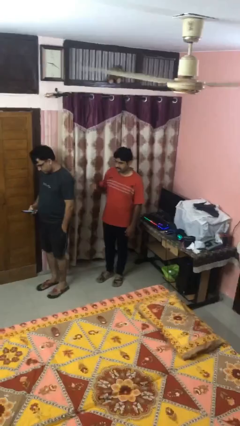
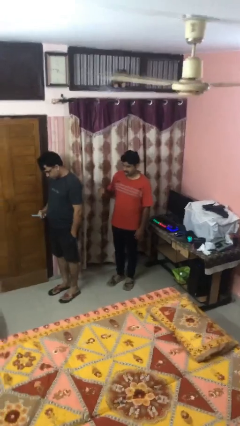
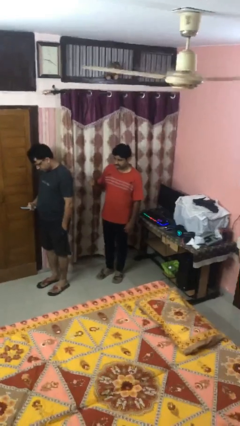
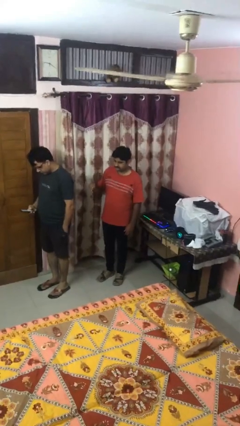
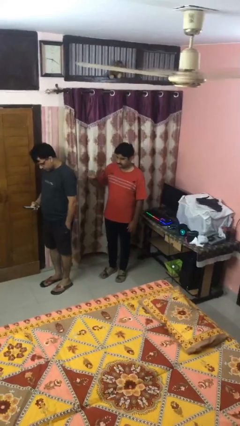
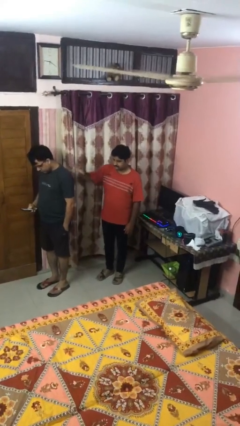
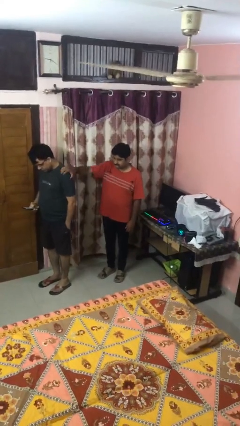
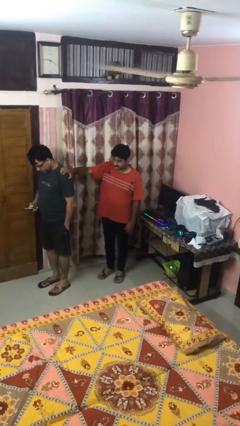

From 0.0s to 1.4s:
person grabs person by shoulder

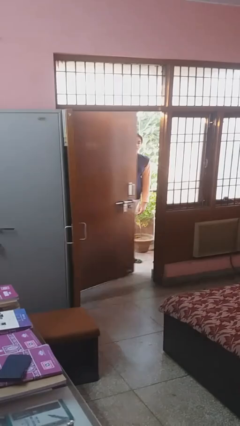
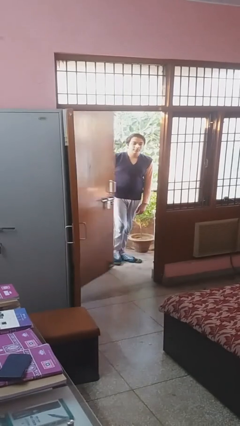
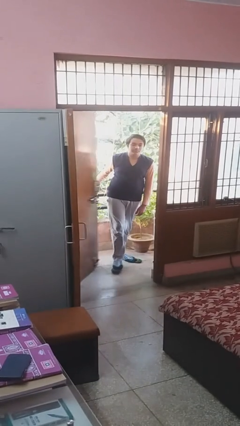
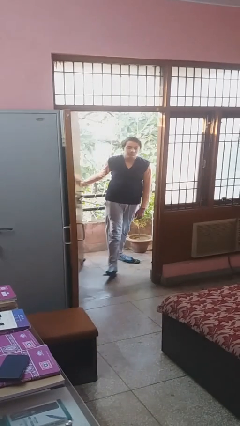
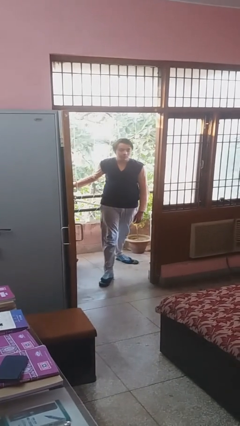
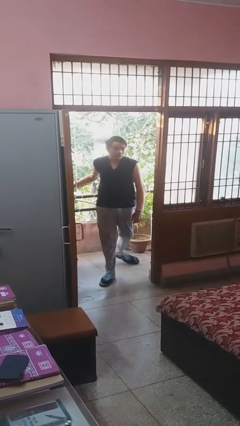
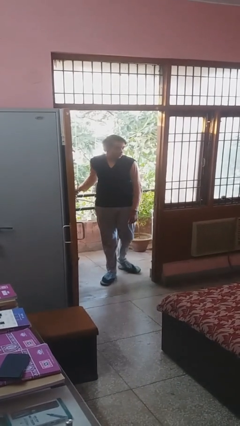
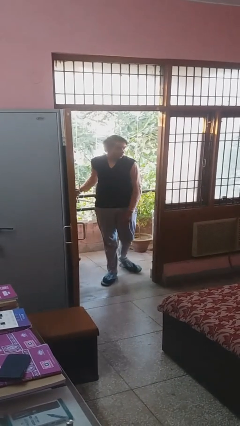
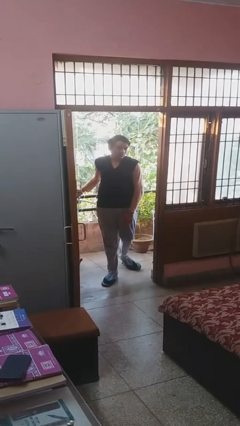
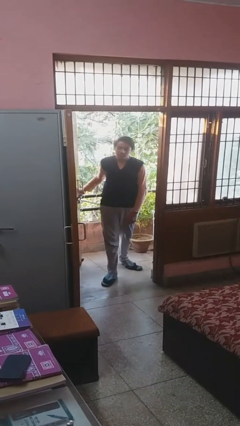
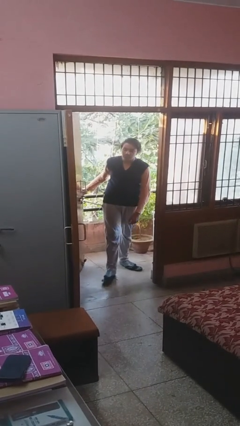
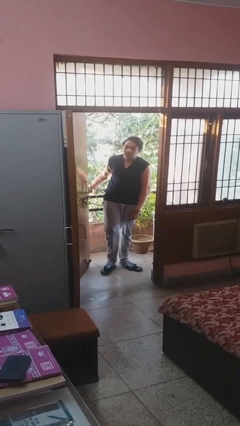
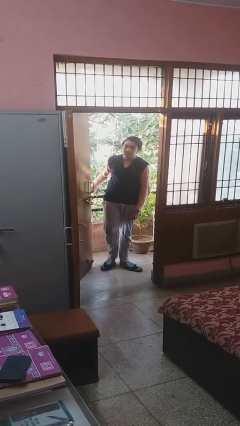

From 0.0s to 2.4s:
person opens facility door

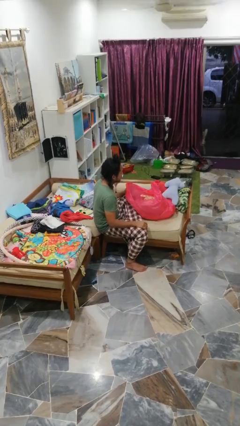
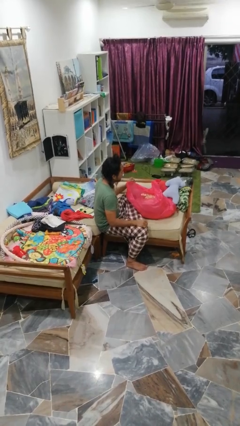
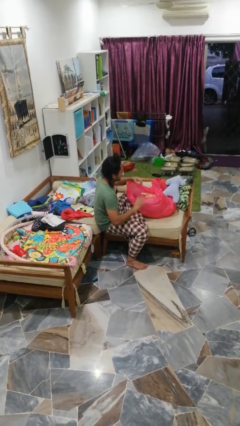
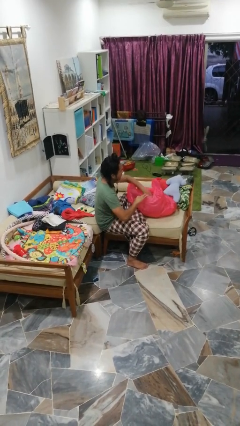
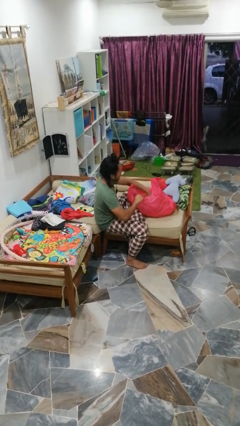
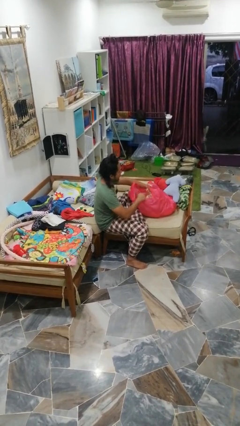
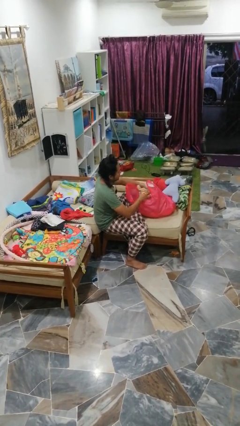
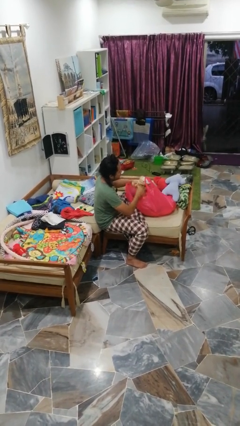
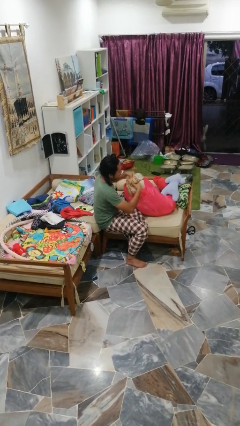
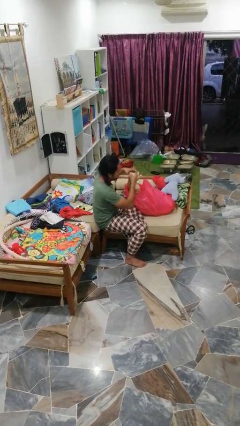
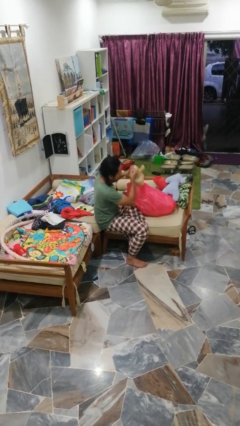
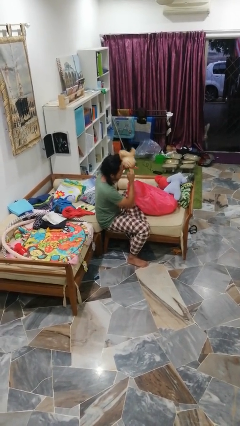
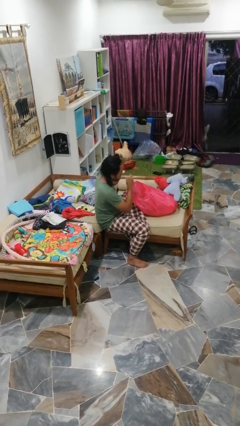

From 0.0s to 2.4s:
person takes object from bag

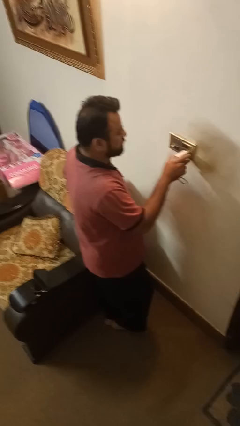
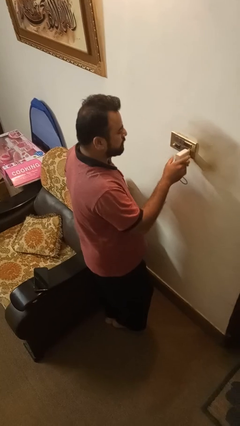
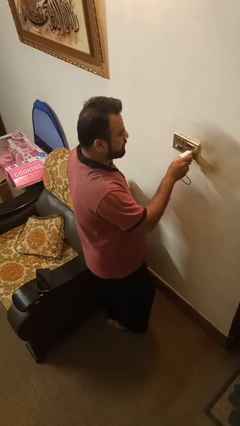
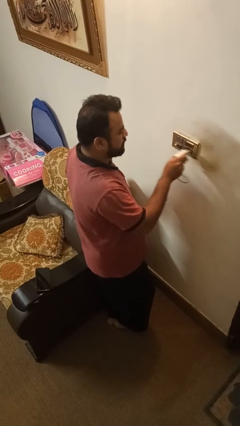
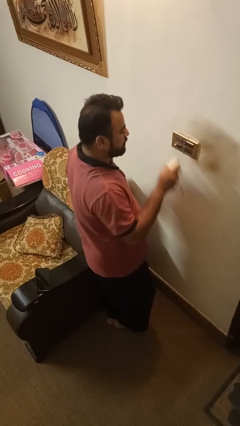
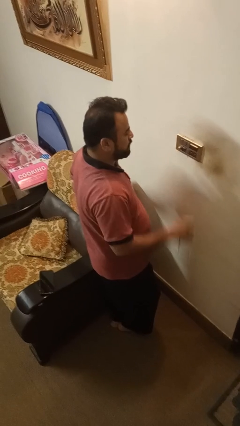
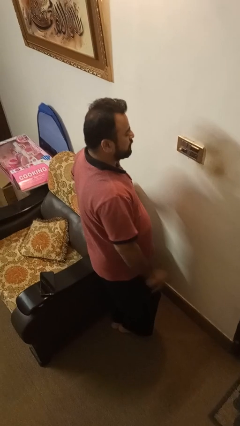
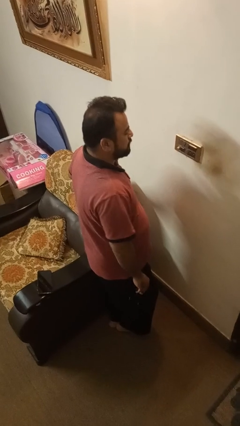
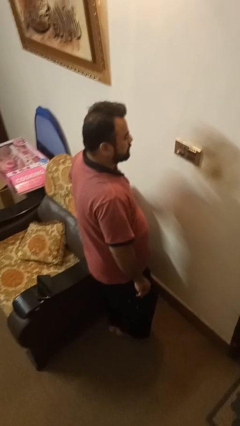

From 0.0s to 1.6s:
person unplugs from electrical socket

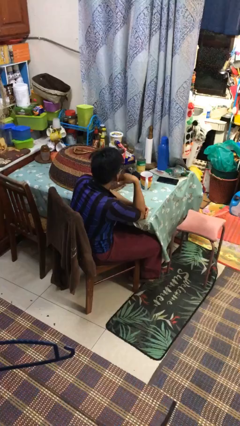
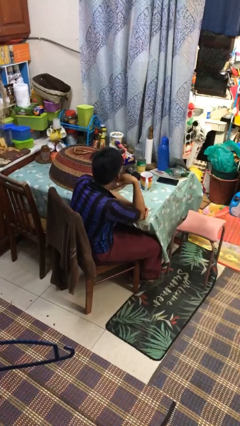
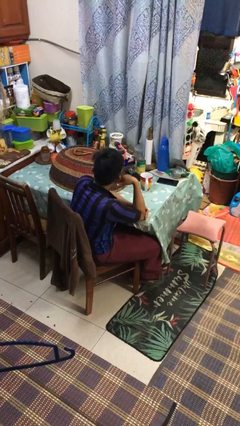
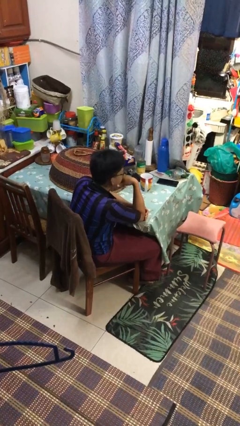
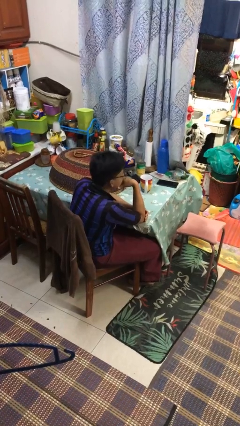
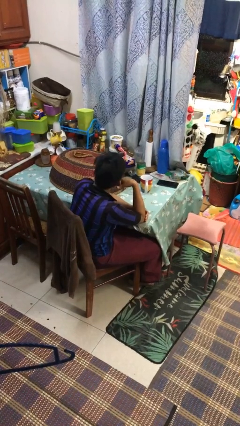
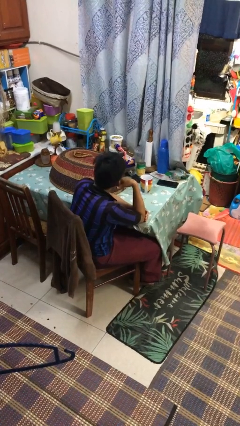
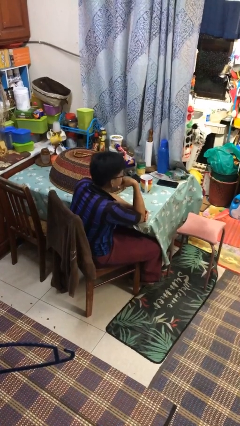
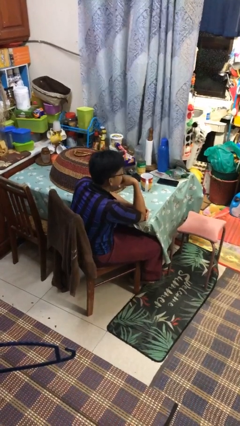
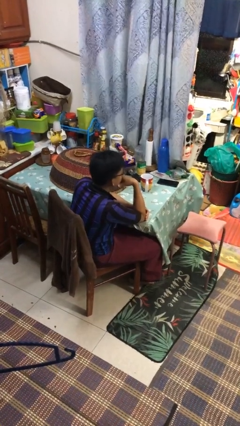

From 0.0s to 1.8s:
person shakes head

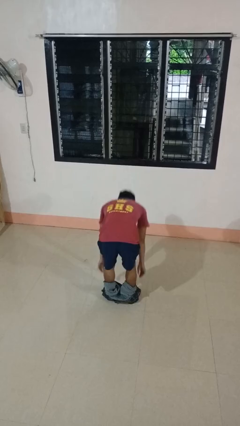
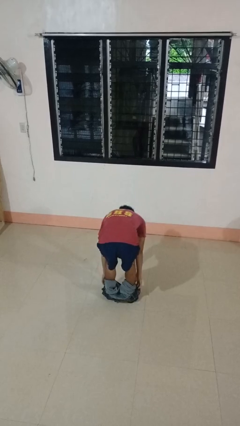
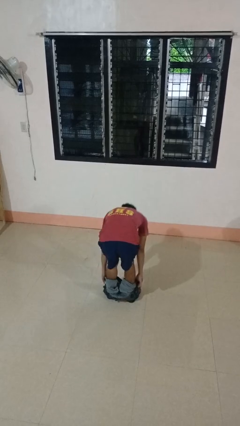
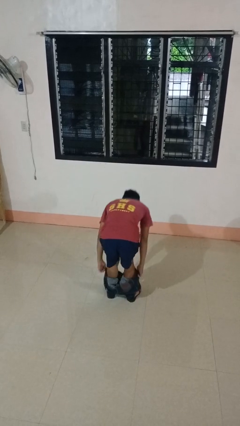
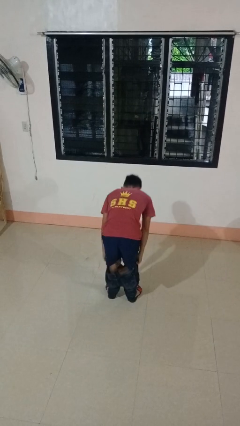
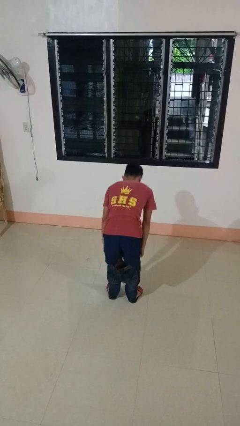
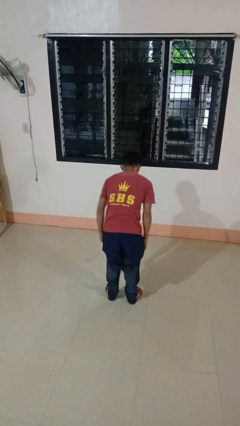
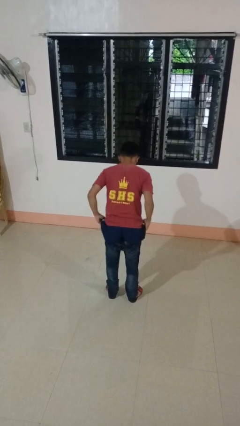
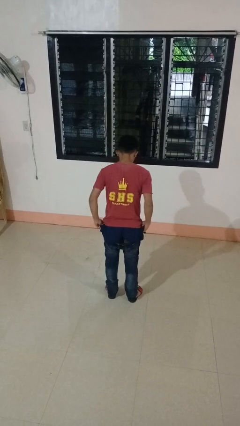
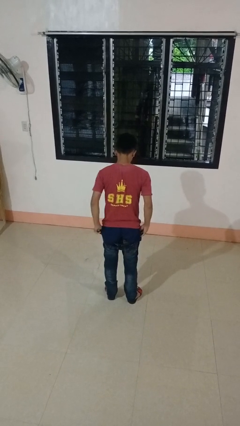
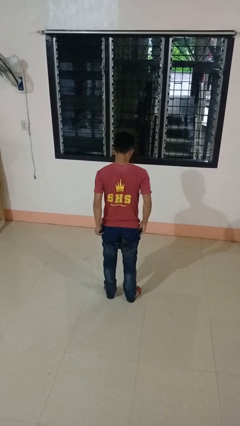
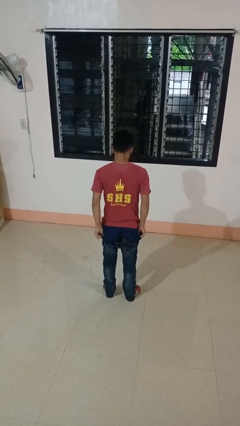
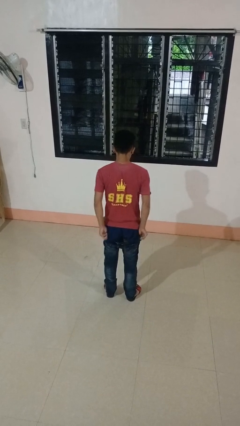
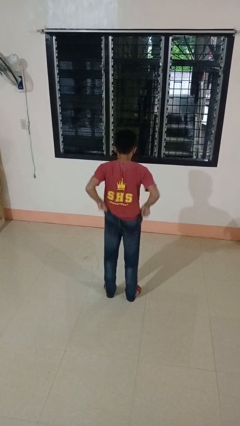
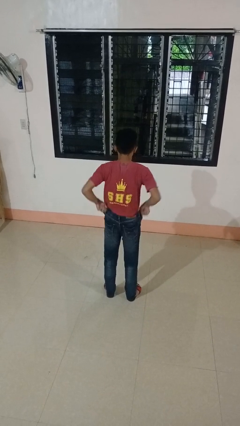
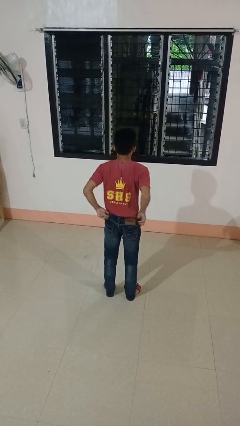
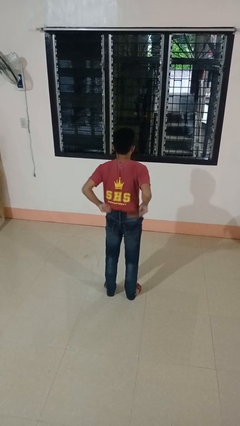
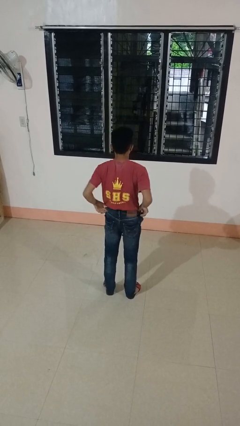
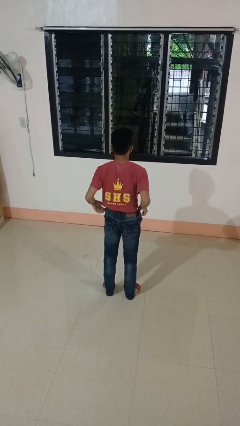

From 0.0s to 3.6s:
person puts on pants

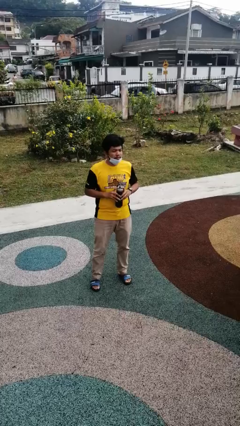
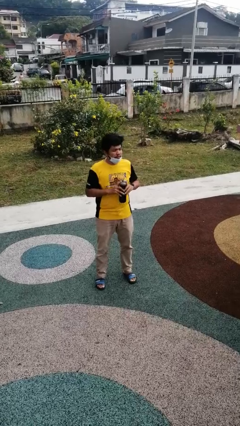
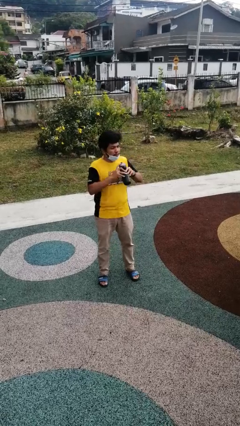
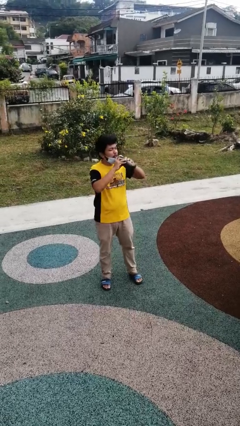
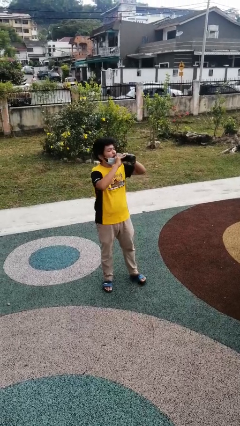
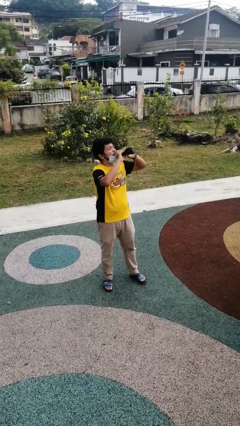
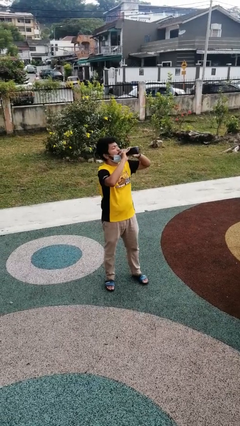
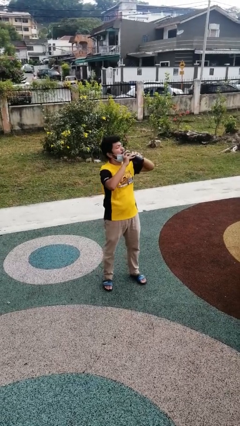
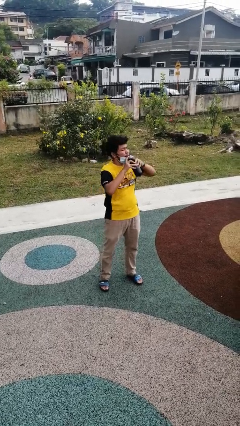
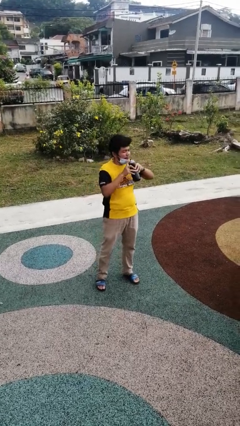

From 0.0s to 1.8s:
person drinks from bottle

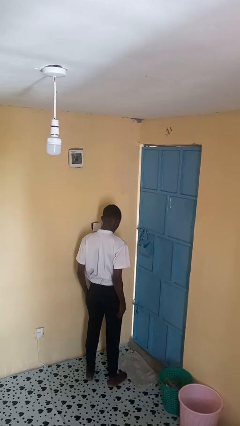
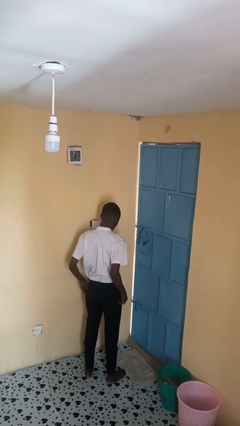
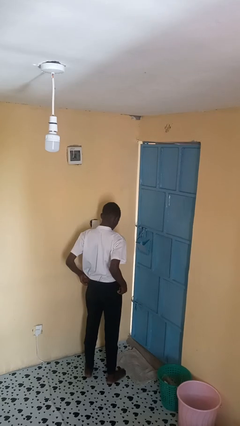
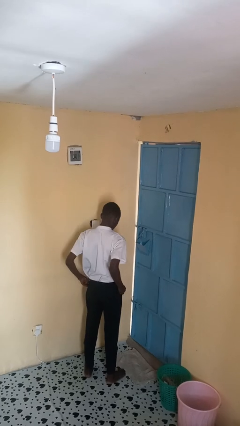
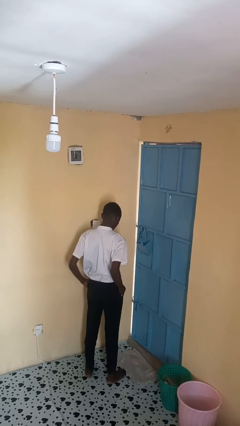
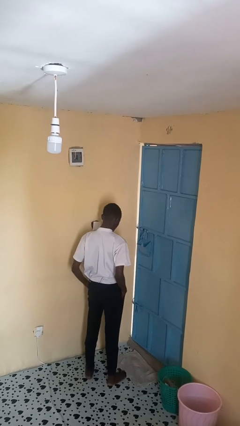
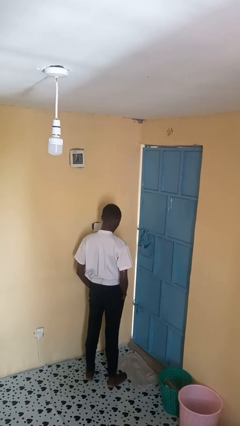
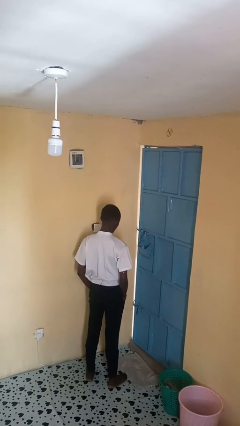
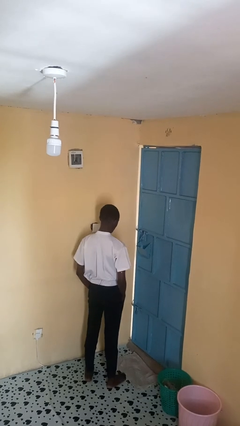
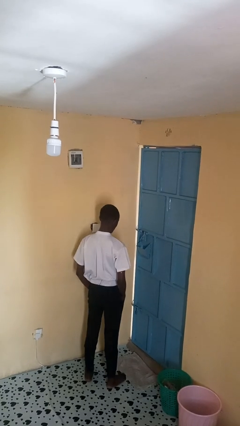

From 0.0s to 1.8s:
person puts hands in back pockets
